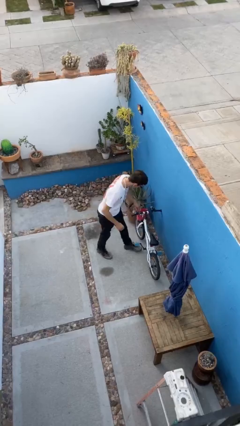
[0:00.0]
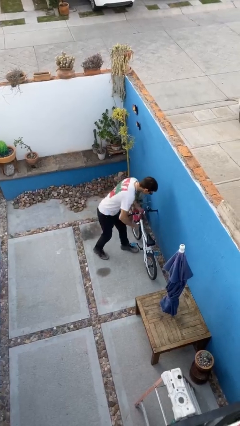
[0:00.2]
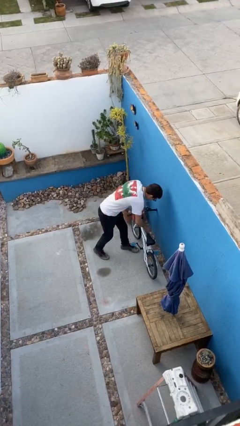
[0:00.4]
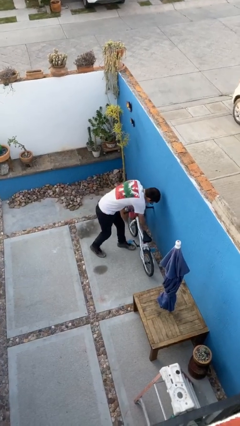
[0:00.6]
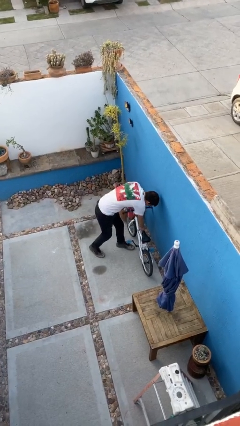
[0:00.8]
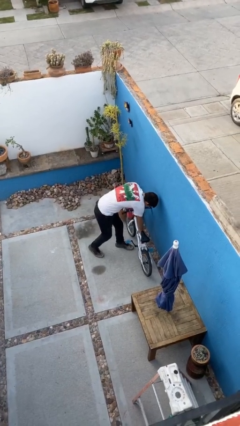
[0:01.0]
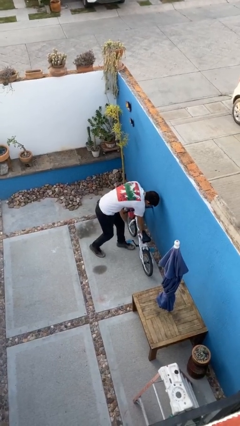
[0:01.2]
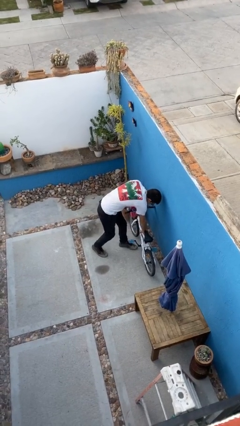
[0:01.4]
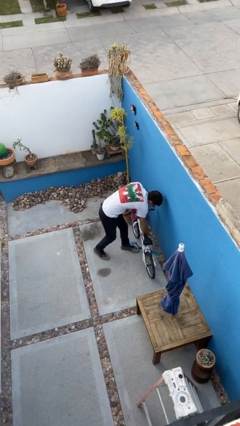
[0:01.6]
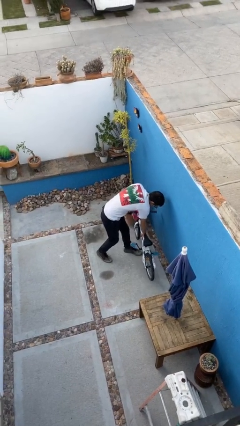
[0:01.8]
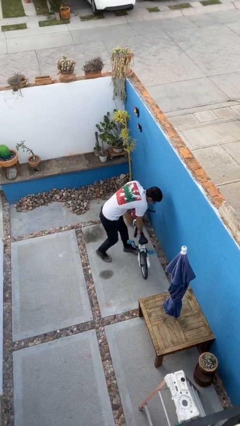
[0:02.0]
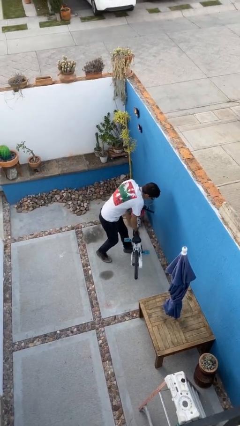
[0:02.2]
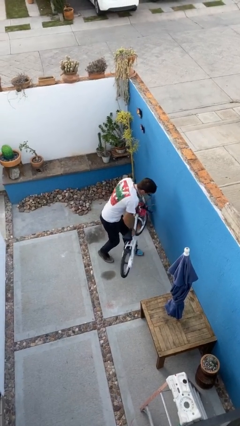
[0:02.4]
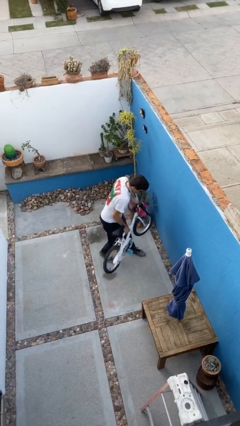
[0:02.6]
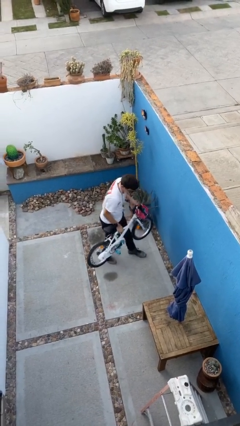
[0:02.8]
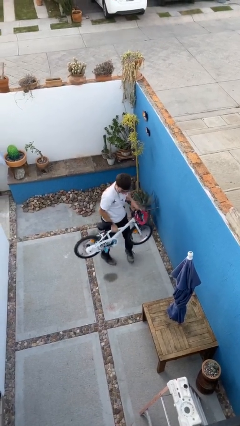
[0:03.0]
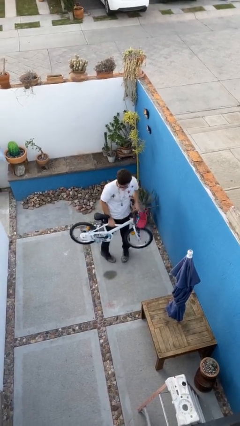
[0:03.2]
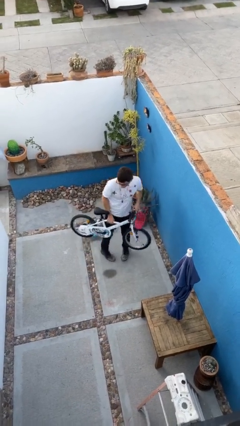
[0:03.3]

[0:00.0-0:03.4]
person picks up object from floor

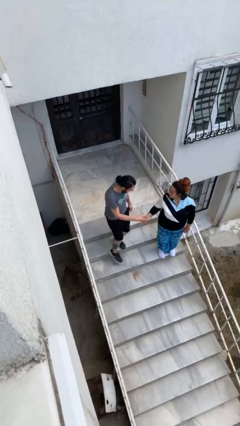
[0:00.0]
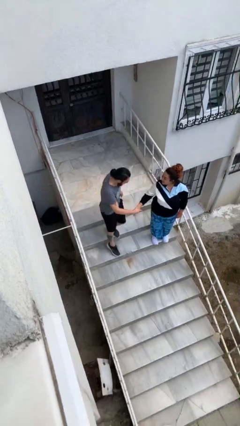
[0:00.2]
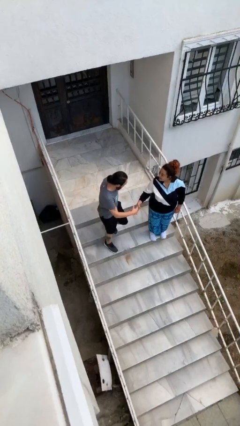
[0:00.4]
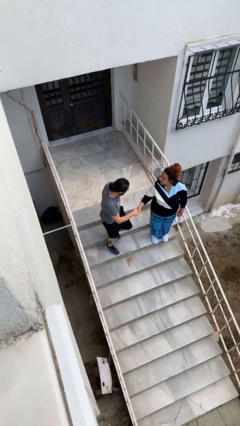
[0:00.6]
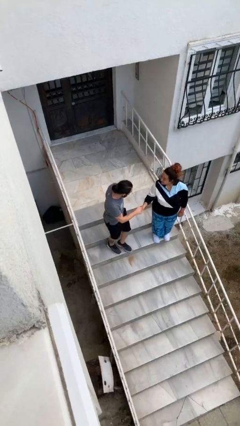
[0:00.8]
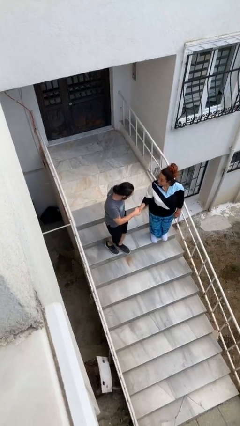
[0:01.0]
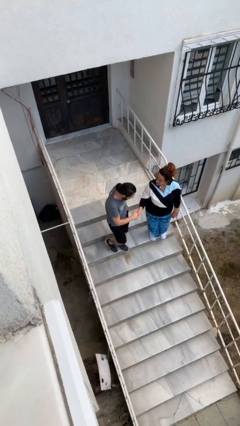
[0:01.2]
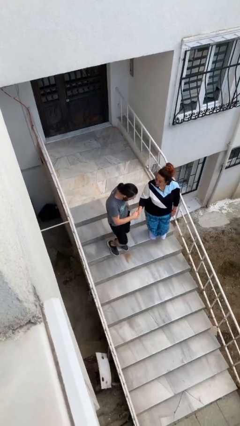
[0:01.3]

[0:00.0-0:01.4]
person shakes hand

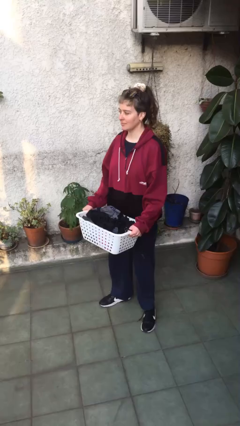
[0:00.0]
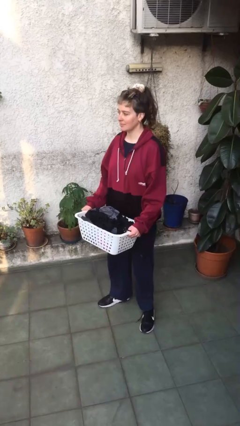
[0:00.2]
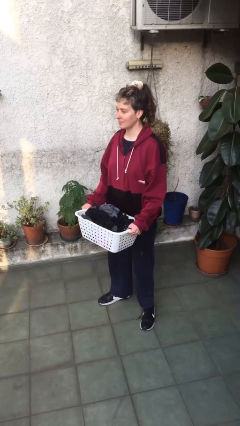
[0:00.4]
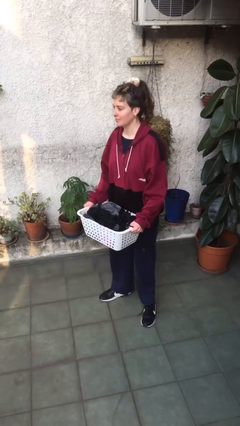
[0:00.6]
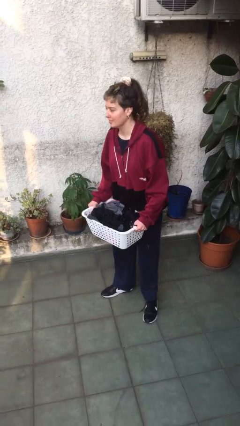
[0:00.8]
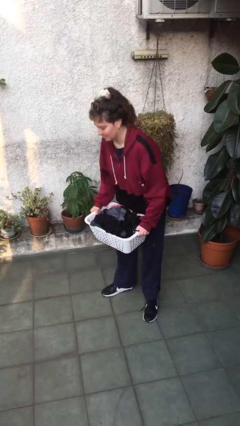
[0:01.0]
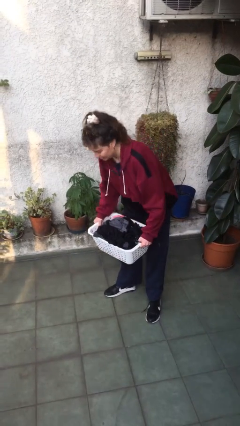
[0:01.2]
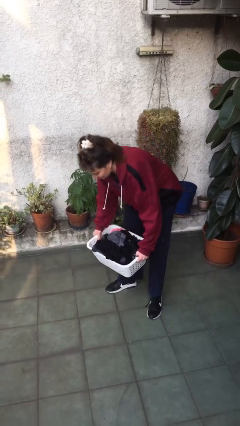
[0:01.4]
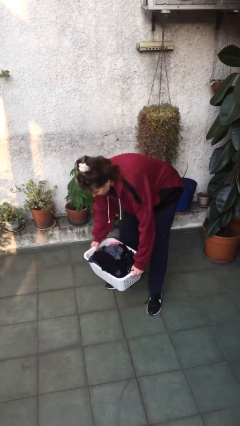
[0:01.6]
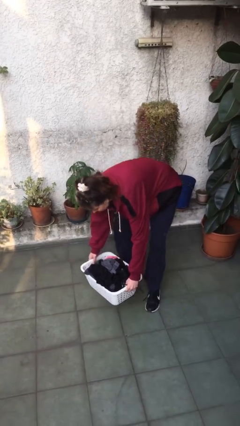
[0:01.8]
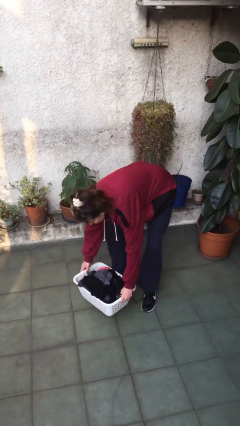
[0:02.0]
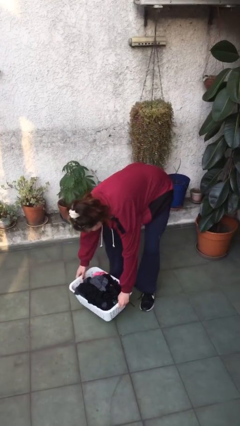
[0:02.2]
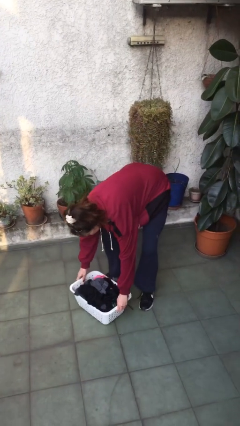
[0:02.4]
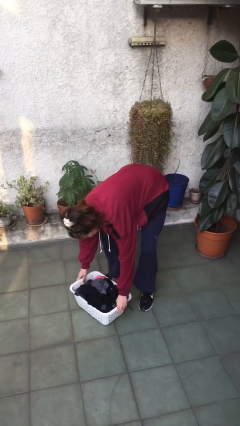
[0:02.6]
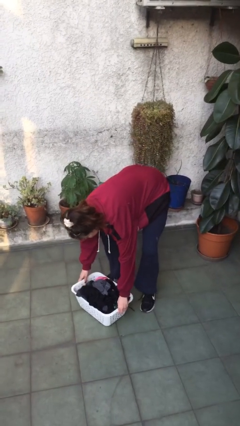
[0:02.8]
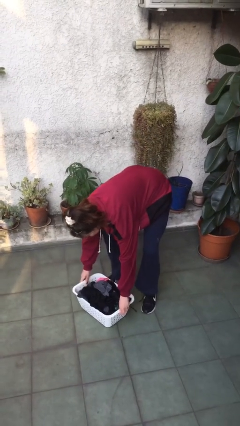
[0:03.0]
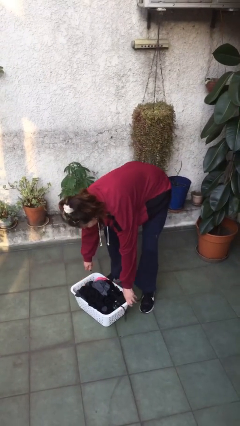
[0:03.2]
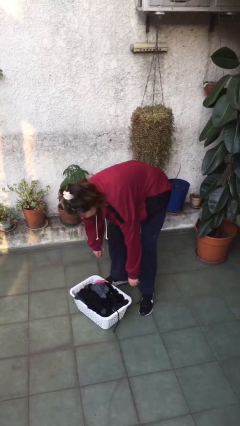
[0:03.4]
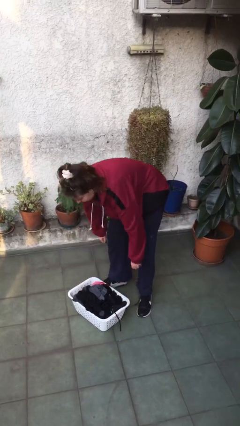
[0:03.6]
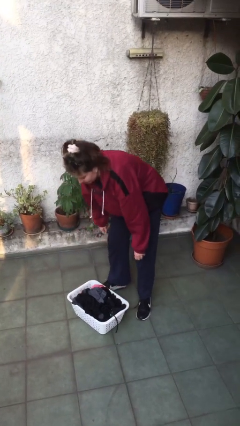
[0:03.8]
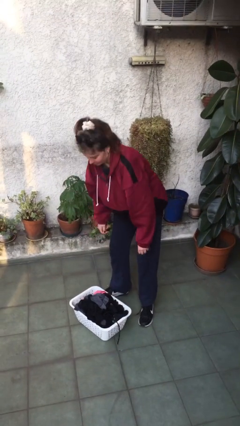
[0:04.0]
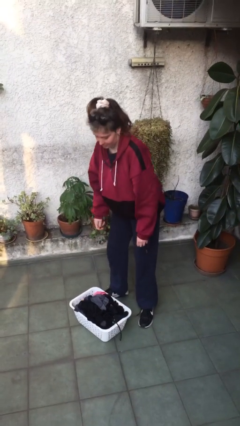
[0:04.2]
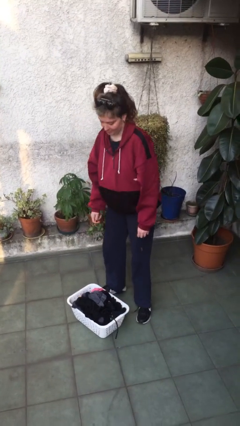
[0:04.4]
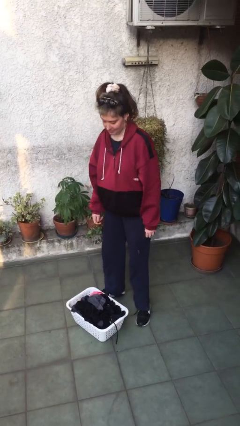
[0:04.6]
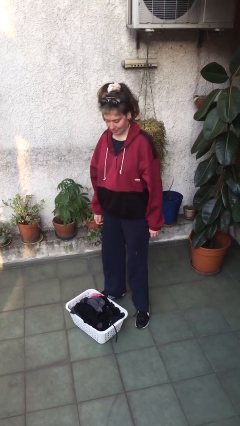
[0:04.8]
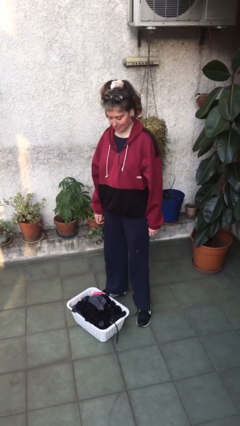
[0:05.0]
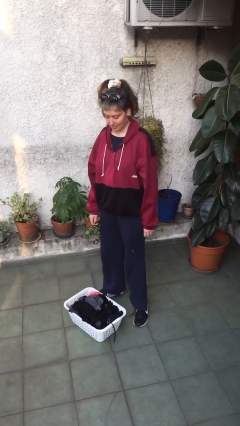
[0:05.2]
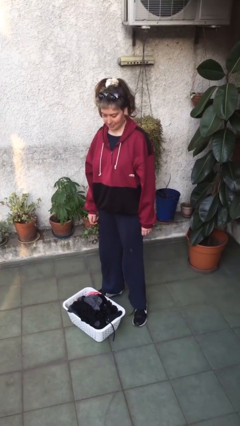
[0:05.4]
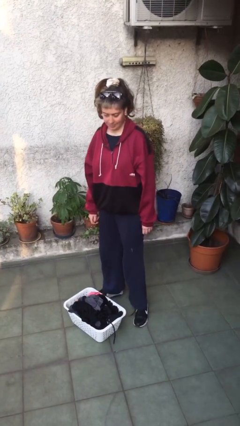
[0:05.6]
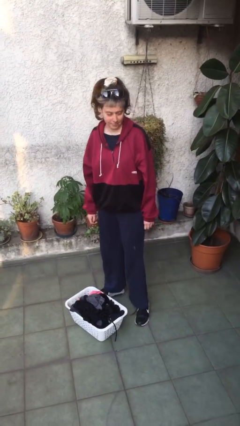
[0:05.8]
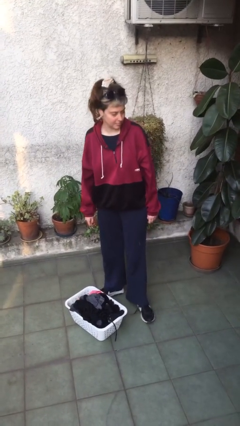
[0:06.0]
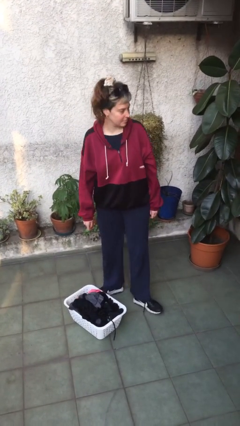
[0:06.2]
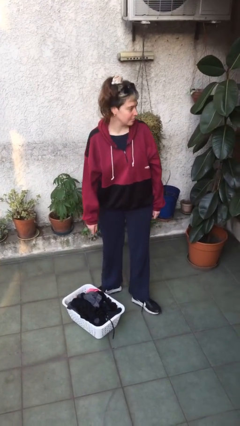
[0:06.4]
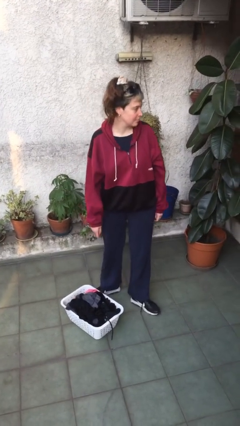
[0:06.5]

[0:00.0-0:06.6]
person puts down object on floor

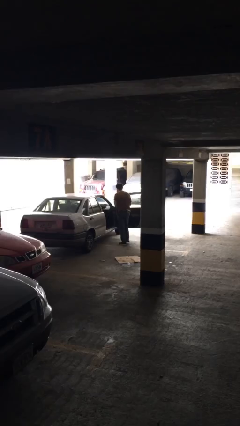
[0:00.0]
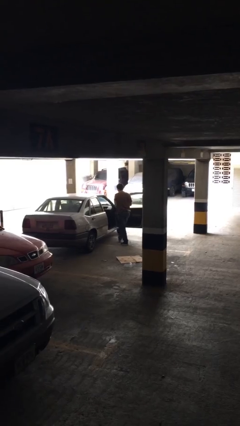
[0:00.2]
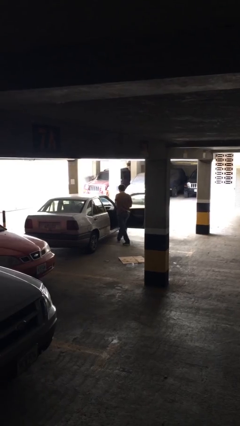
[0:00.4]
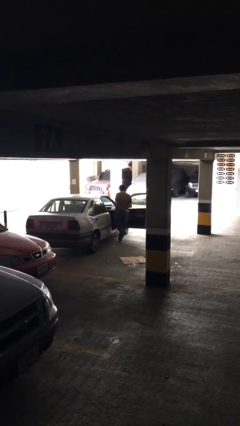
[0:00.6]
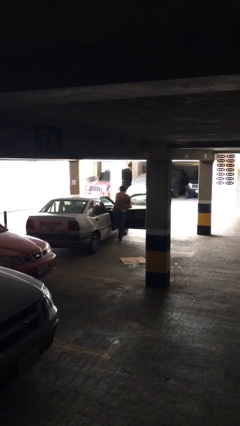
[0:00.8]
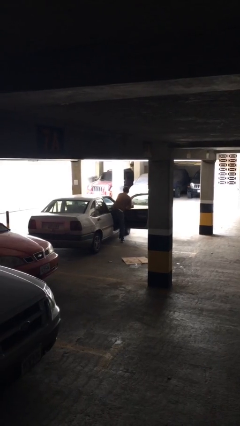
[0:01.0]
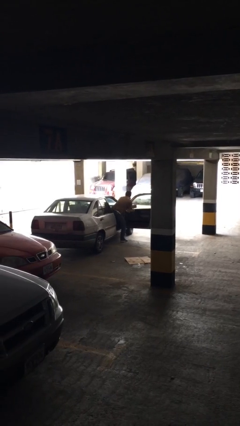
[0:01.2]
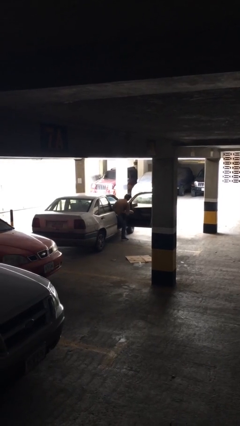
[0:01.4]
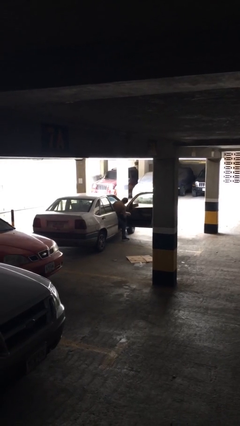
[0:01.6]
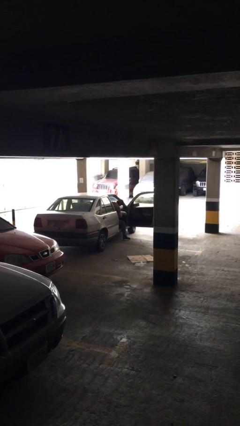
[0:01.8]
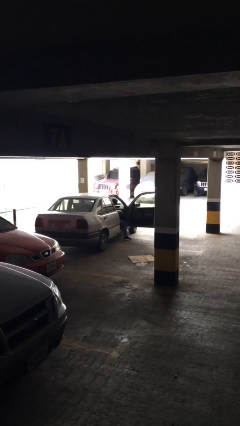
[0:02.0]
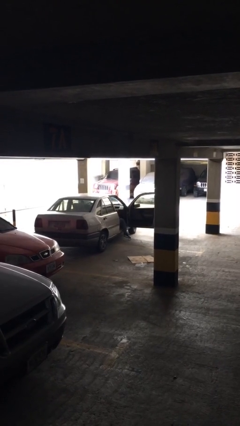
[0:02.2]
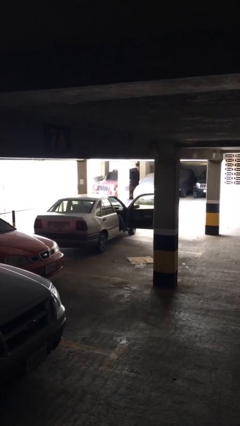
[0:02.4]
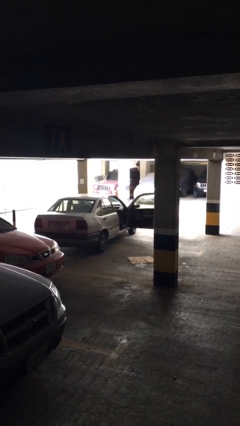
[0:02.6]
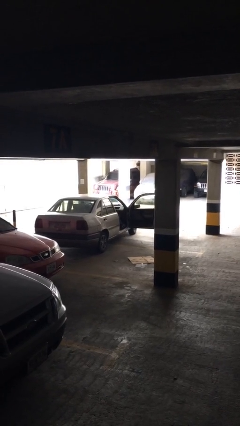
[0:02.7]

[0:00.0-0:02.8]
person enters car

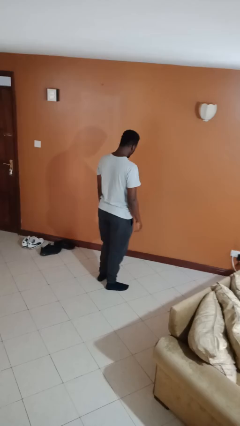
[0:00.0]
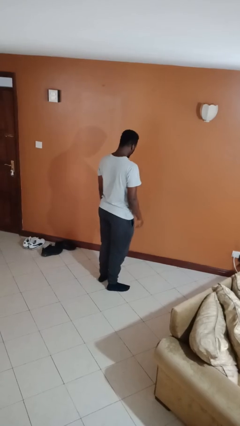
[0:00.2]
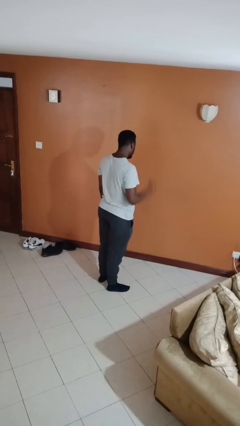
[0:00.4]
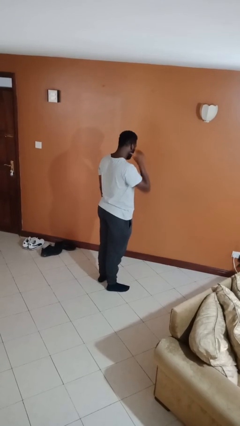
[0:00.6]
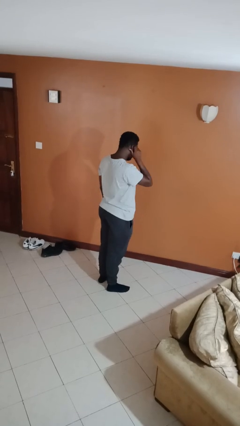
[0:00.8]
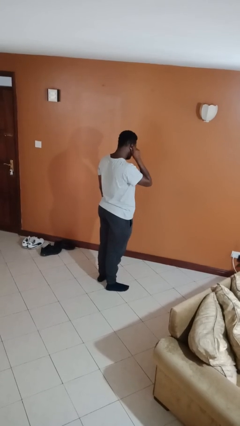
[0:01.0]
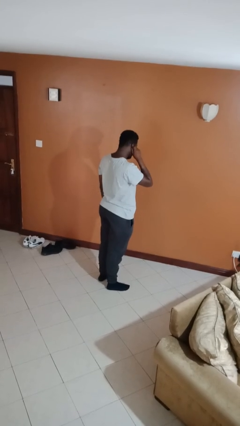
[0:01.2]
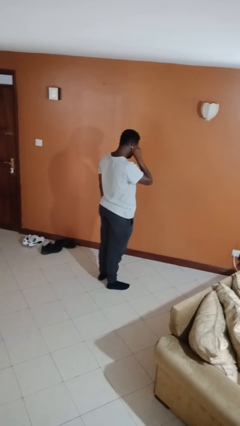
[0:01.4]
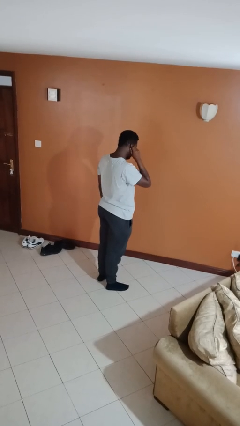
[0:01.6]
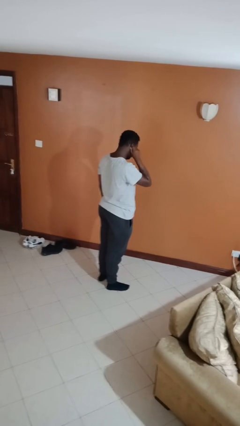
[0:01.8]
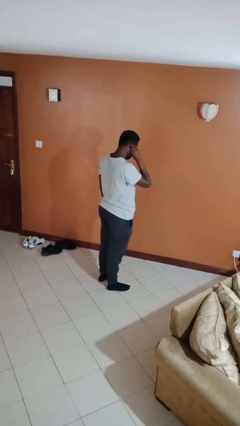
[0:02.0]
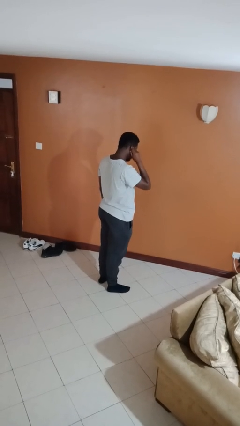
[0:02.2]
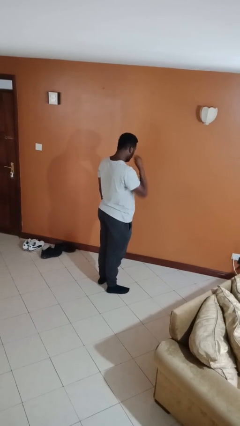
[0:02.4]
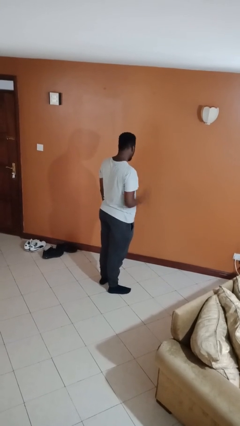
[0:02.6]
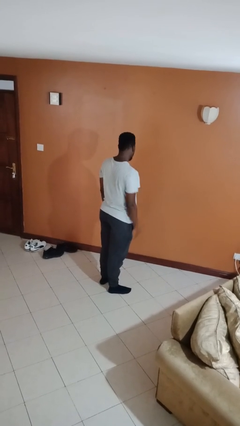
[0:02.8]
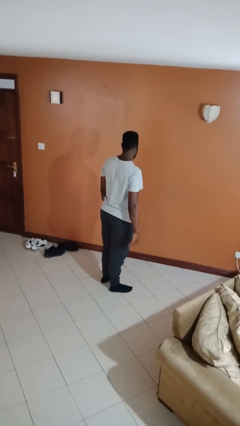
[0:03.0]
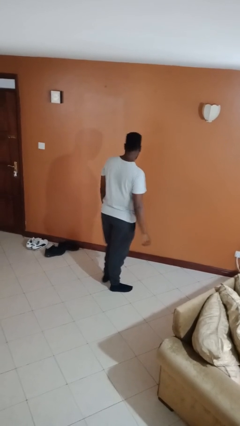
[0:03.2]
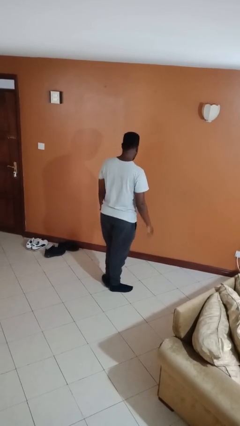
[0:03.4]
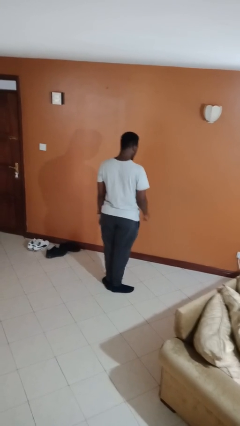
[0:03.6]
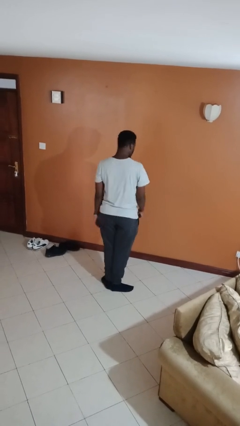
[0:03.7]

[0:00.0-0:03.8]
person touches earlobe
